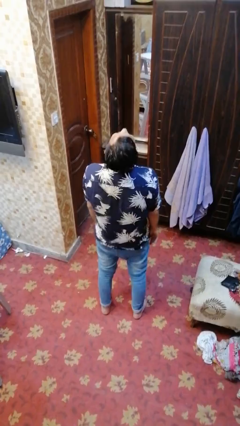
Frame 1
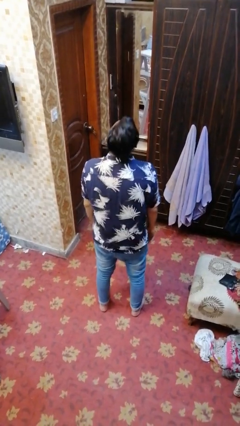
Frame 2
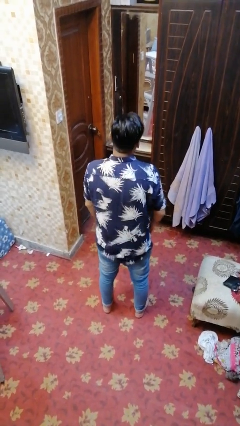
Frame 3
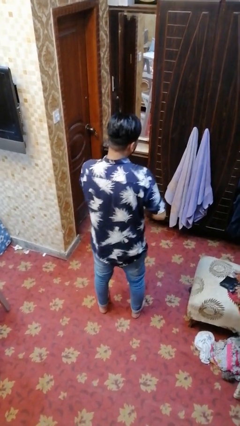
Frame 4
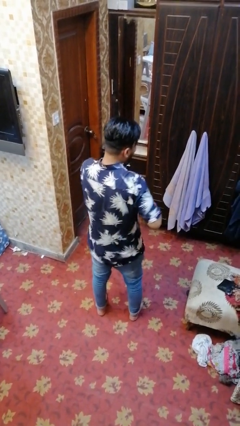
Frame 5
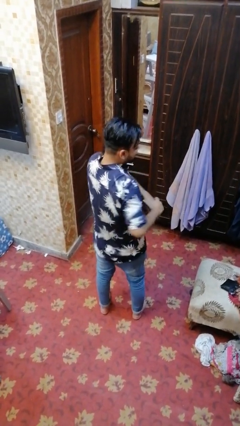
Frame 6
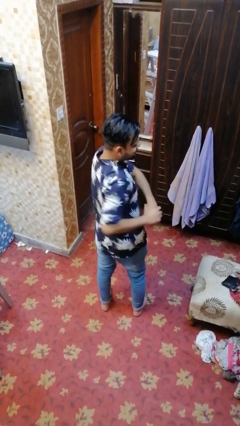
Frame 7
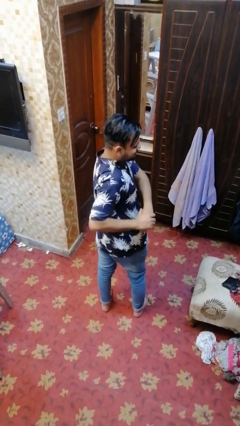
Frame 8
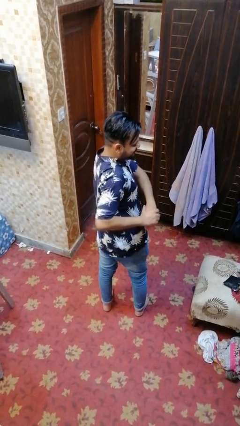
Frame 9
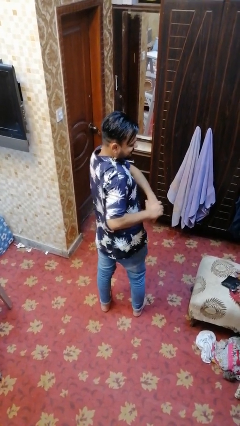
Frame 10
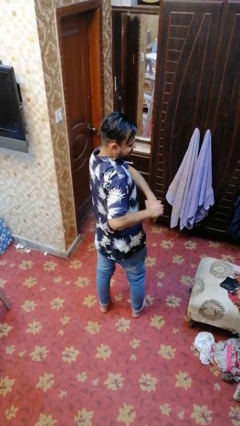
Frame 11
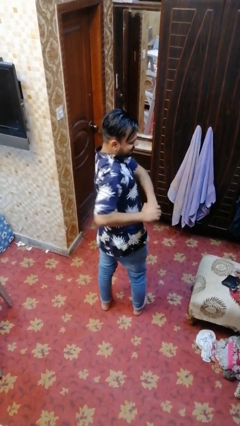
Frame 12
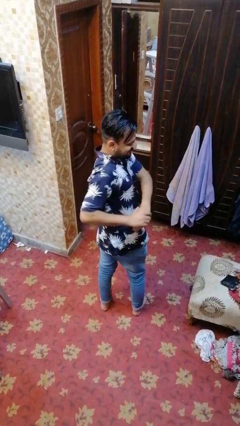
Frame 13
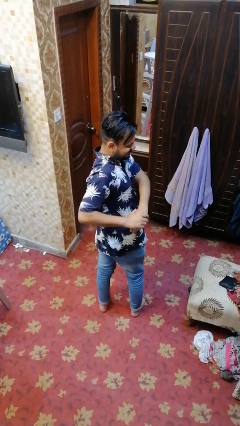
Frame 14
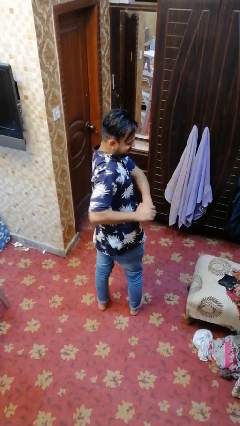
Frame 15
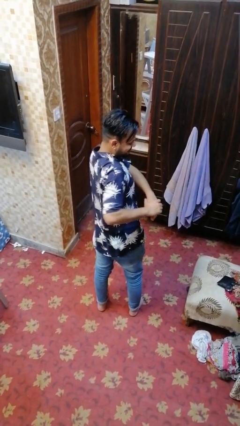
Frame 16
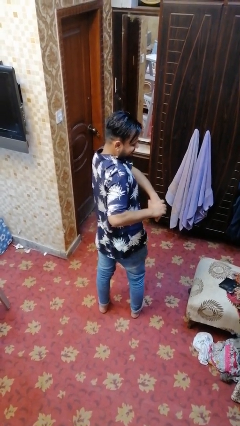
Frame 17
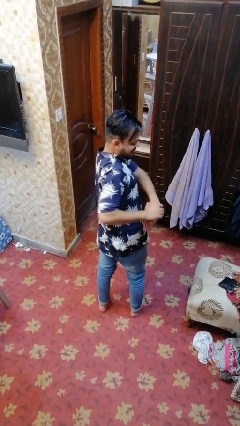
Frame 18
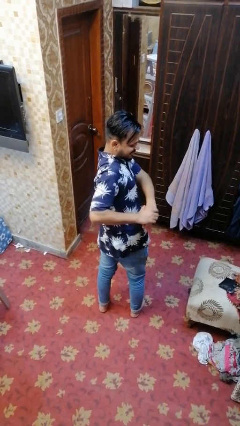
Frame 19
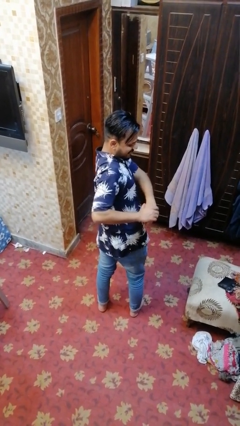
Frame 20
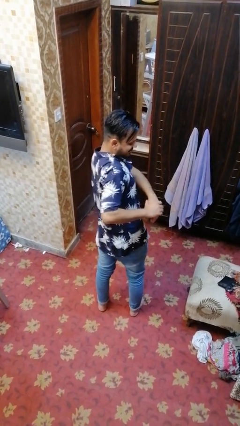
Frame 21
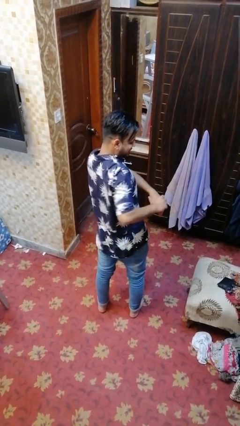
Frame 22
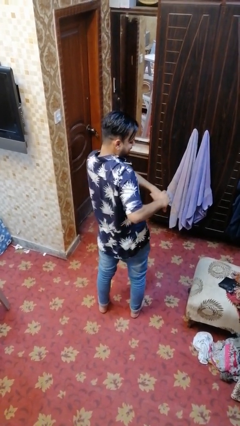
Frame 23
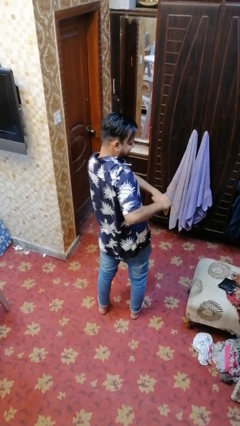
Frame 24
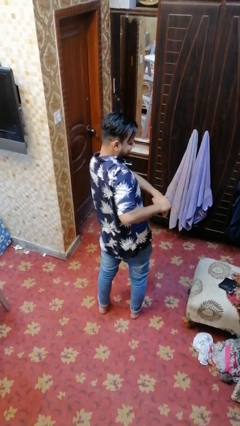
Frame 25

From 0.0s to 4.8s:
person stretches arms to side

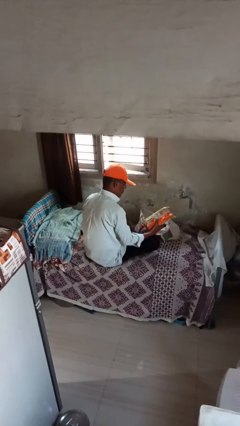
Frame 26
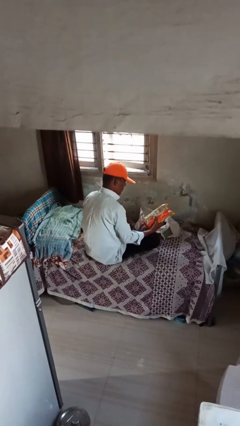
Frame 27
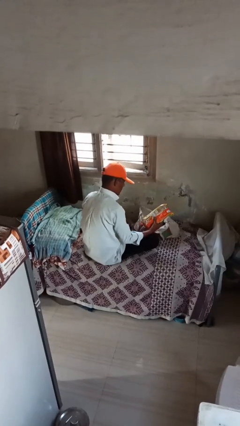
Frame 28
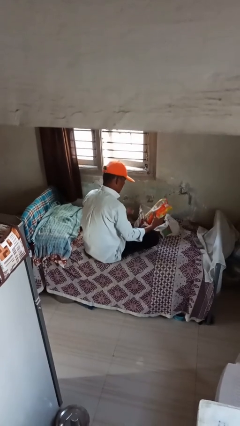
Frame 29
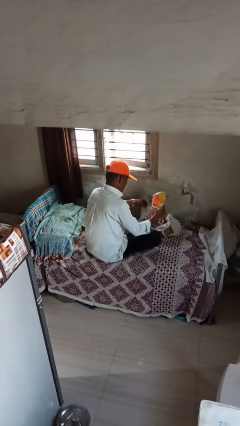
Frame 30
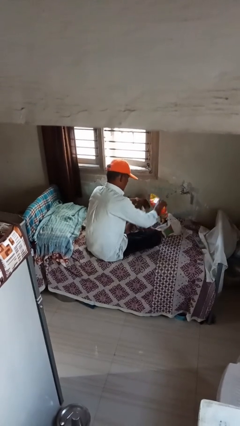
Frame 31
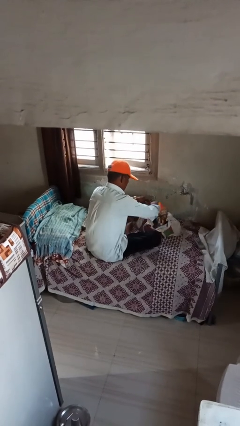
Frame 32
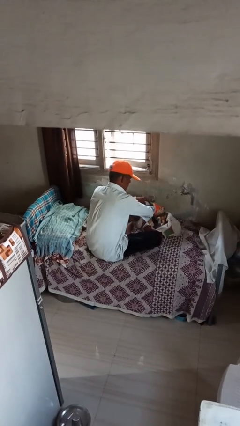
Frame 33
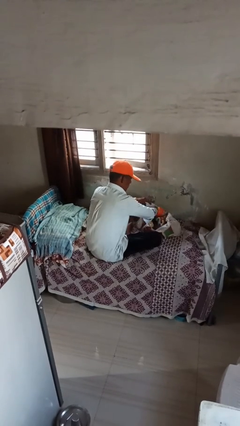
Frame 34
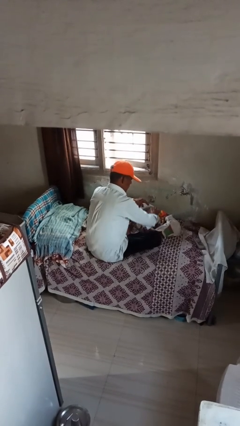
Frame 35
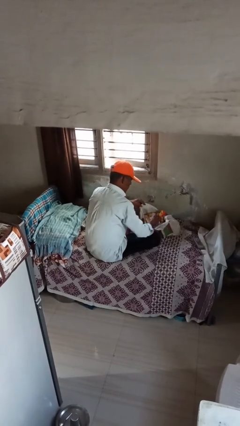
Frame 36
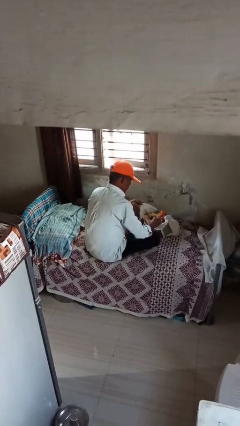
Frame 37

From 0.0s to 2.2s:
person puts object into bag

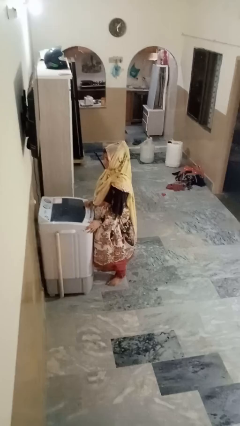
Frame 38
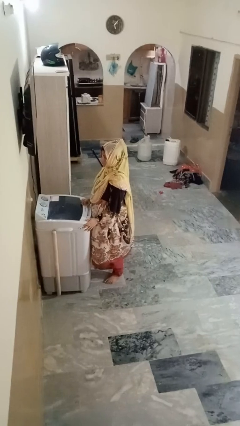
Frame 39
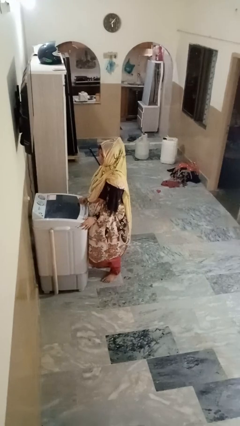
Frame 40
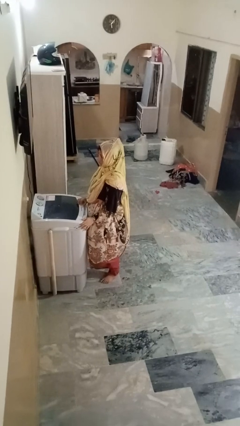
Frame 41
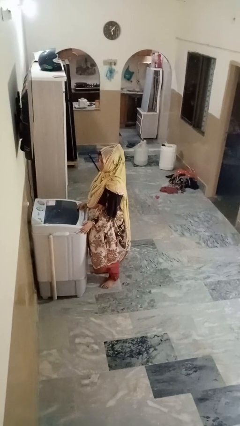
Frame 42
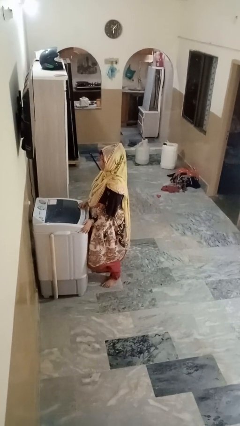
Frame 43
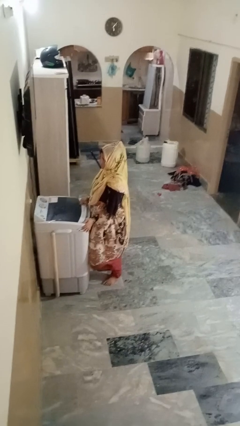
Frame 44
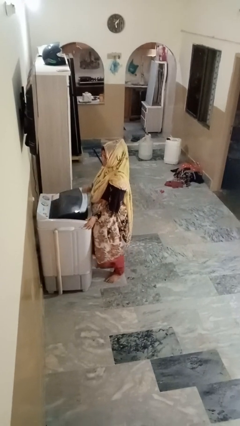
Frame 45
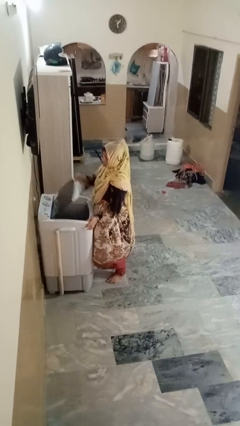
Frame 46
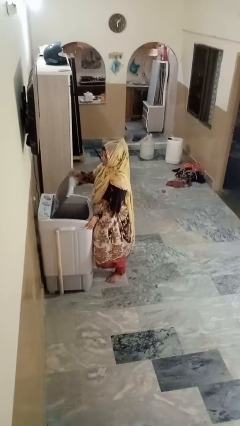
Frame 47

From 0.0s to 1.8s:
person closes clothes washer

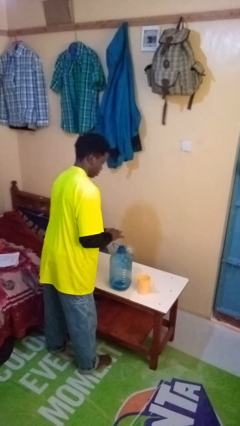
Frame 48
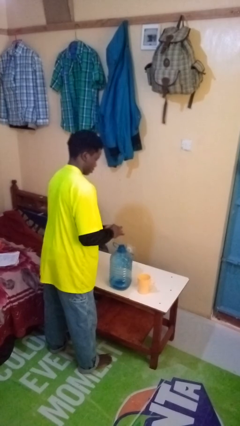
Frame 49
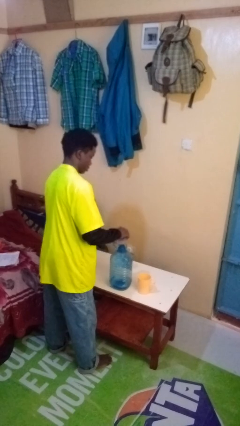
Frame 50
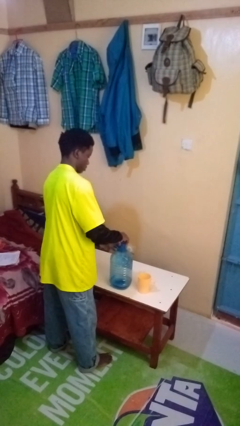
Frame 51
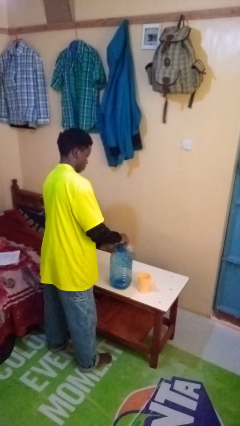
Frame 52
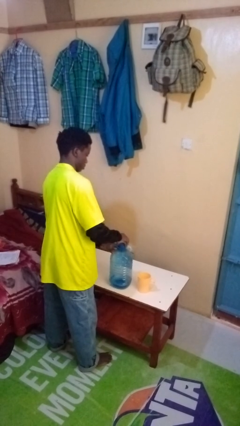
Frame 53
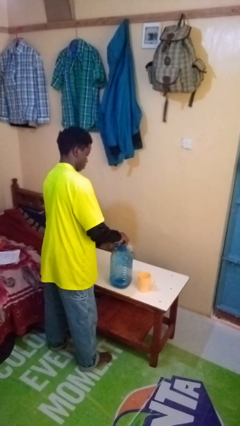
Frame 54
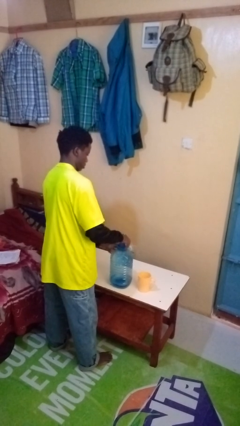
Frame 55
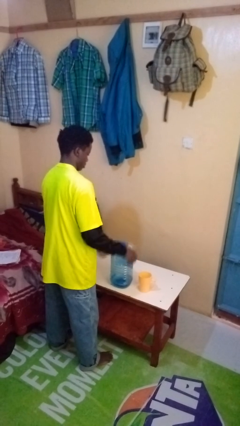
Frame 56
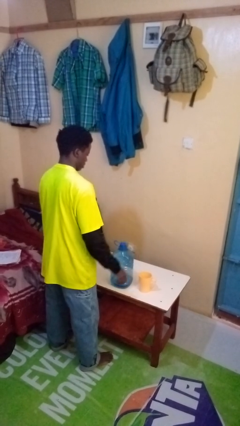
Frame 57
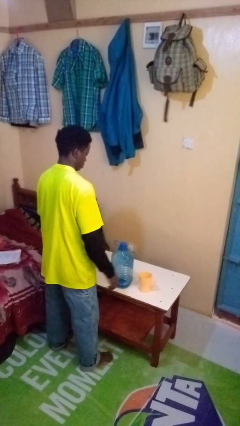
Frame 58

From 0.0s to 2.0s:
person screws lid to bottle

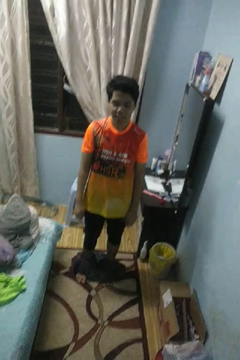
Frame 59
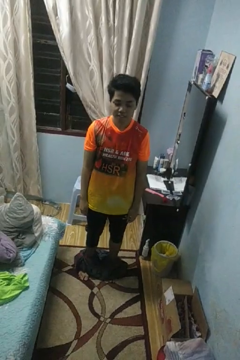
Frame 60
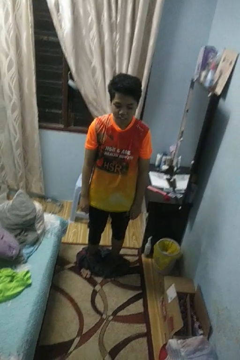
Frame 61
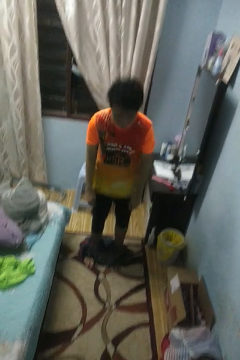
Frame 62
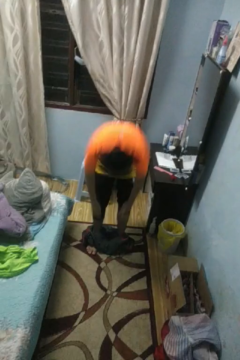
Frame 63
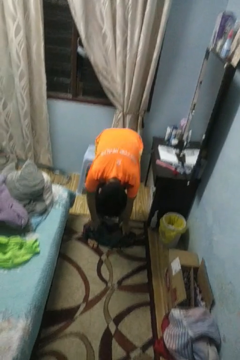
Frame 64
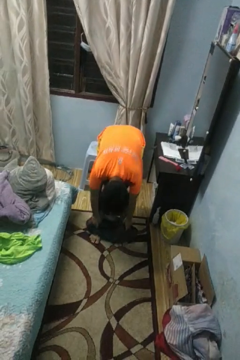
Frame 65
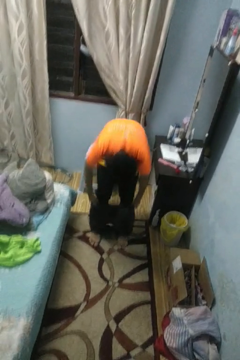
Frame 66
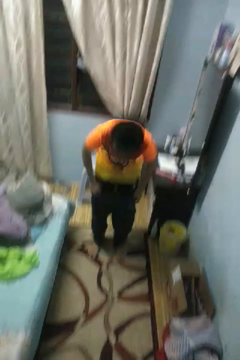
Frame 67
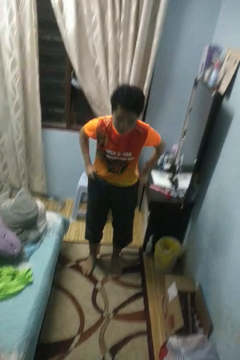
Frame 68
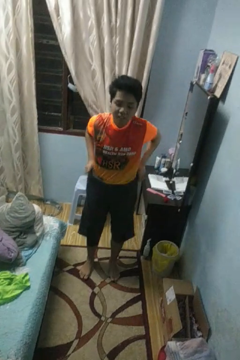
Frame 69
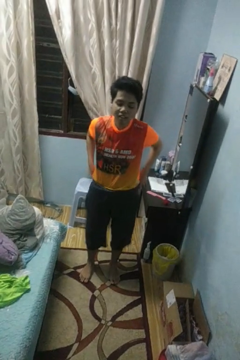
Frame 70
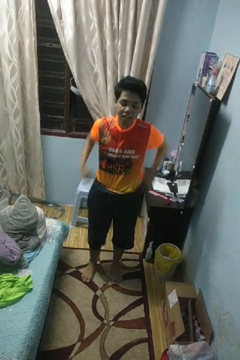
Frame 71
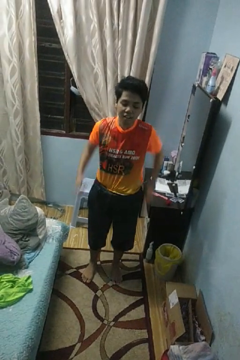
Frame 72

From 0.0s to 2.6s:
person puts on pants

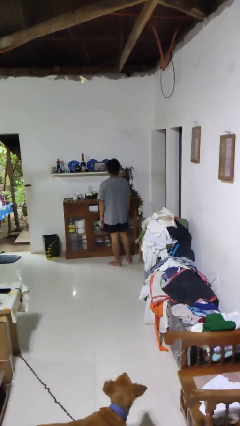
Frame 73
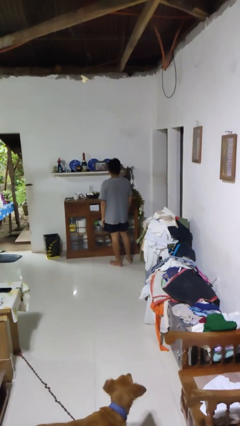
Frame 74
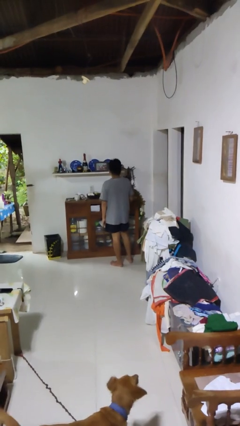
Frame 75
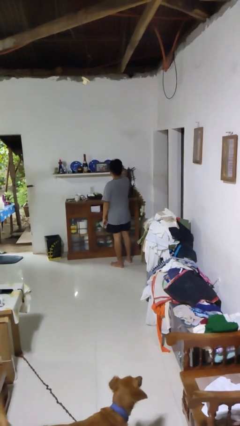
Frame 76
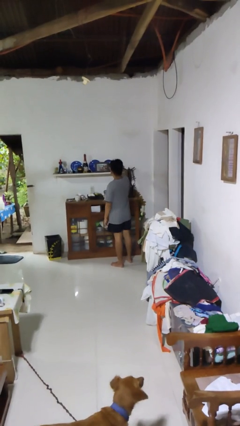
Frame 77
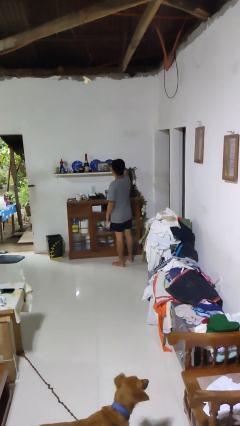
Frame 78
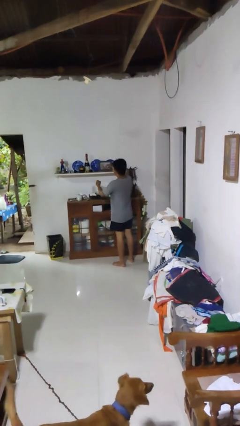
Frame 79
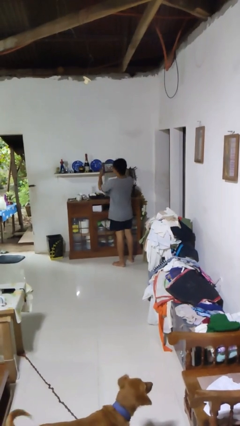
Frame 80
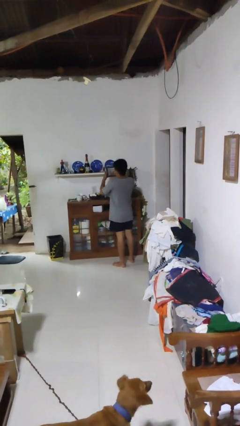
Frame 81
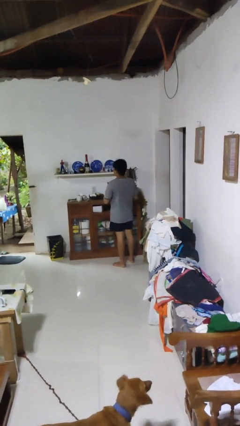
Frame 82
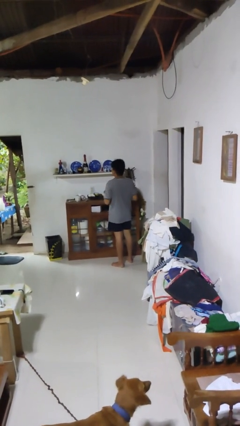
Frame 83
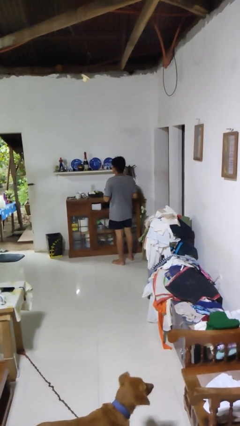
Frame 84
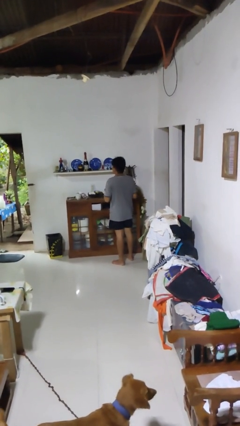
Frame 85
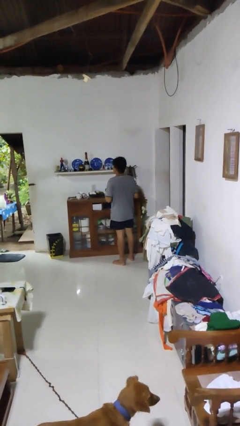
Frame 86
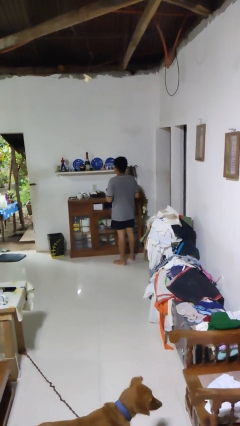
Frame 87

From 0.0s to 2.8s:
person picks up object from shelf

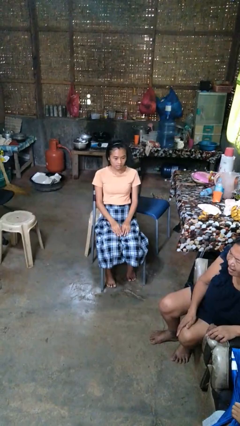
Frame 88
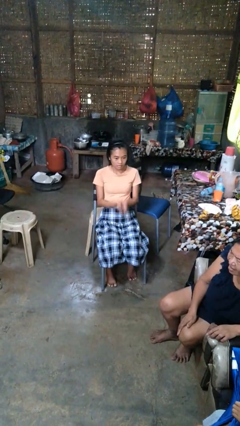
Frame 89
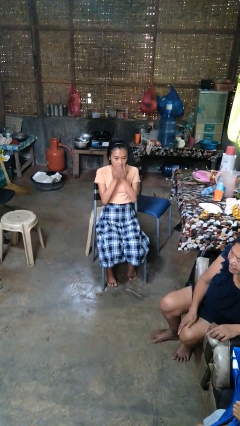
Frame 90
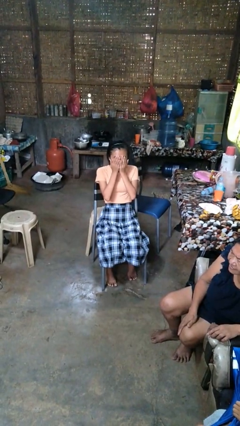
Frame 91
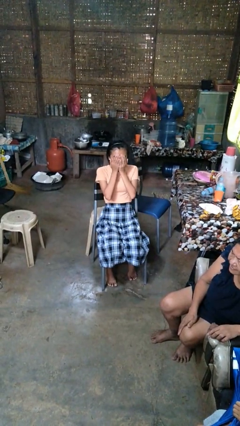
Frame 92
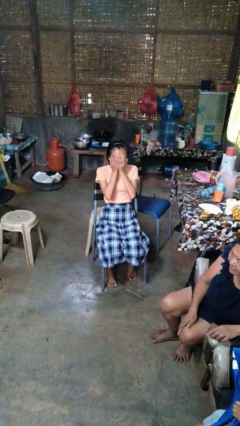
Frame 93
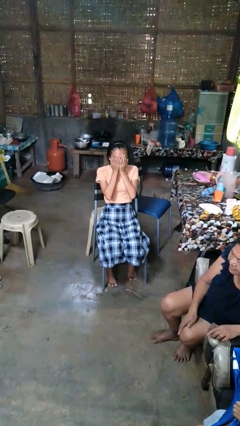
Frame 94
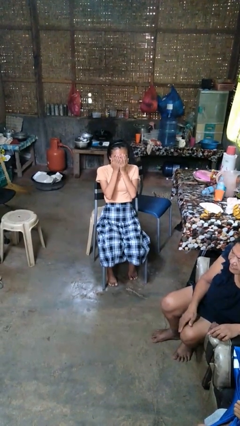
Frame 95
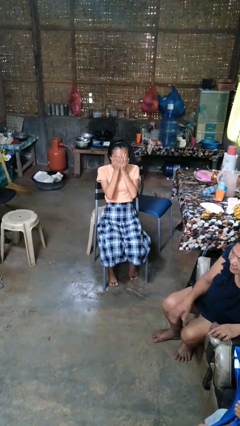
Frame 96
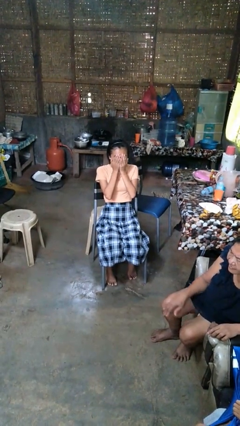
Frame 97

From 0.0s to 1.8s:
person covers face with hands
